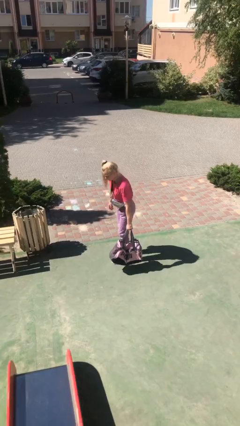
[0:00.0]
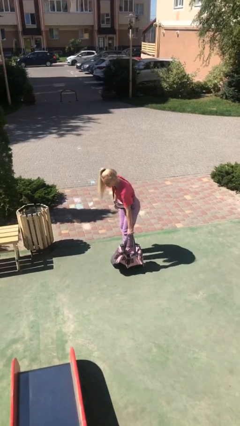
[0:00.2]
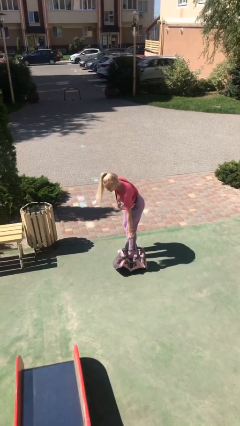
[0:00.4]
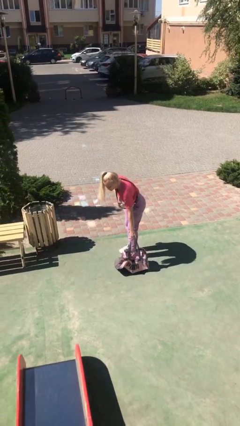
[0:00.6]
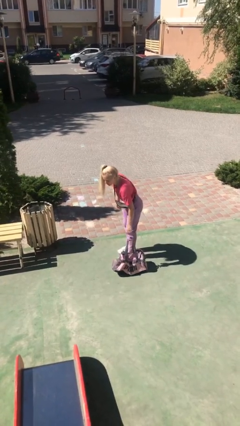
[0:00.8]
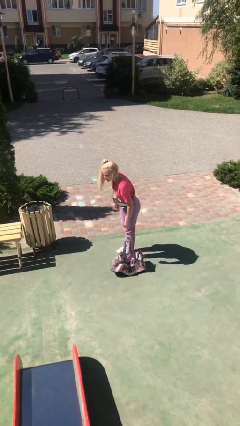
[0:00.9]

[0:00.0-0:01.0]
person puts down object on floor

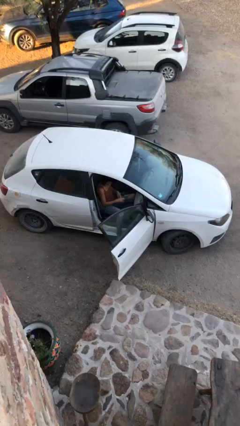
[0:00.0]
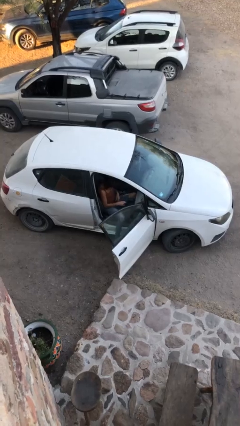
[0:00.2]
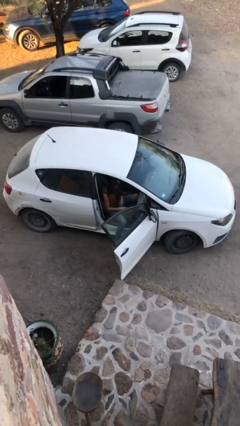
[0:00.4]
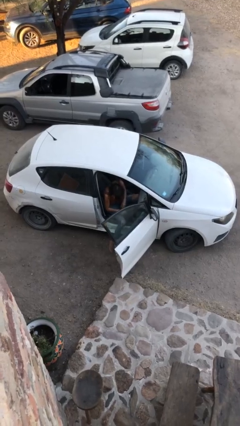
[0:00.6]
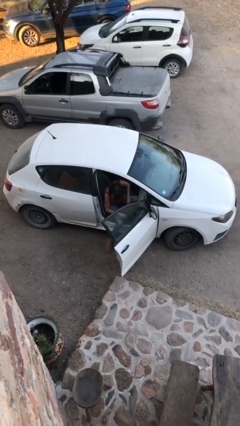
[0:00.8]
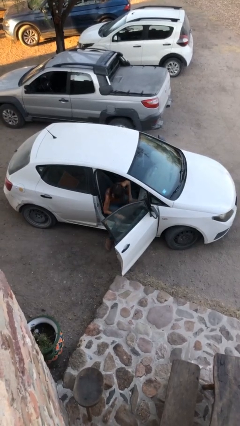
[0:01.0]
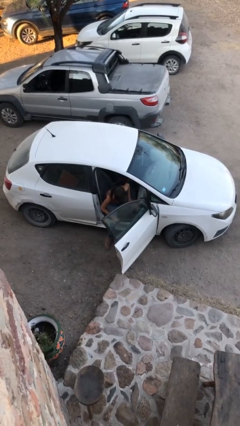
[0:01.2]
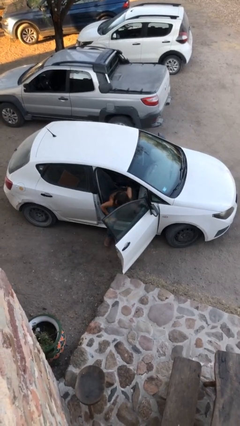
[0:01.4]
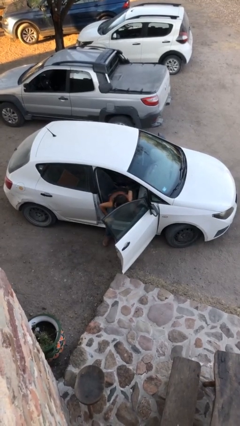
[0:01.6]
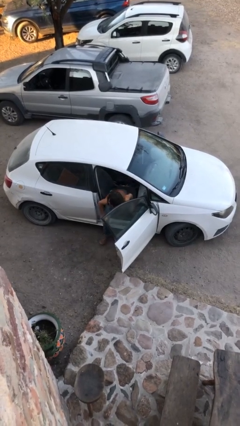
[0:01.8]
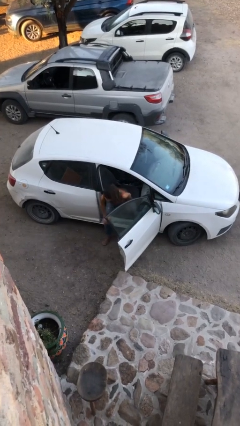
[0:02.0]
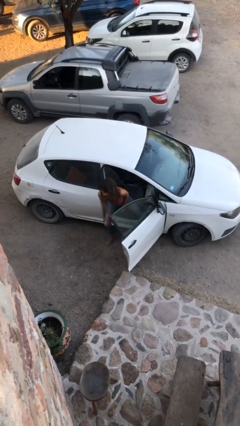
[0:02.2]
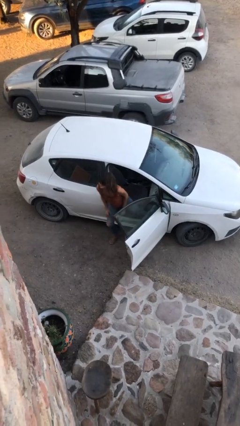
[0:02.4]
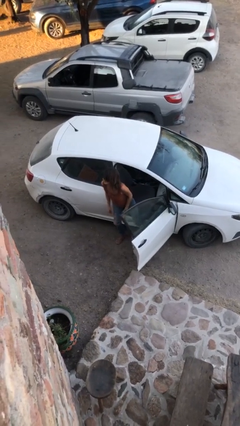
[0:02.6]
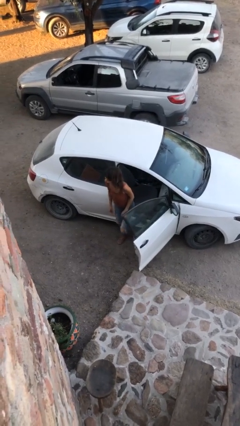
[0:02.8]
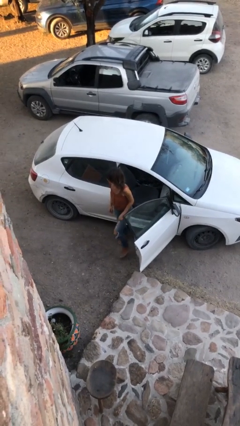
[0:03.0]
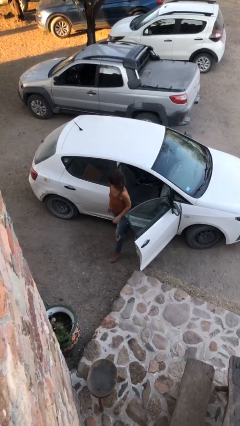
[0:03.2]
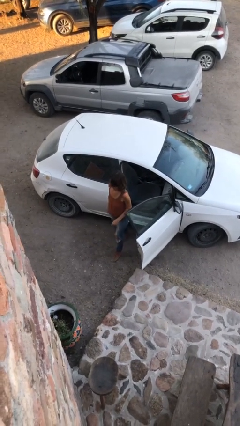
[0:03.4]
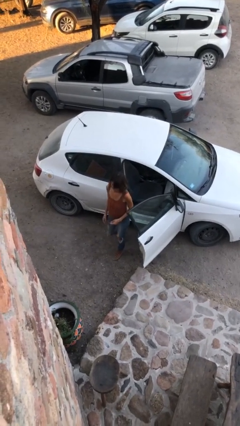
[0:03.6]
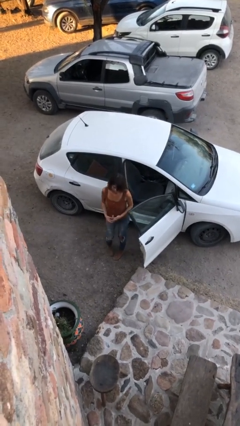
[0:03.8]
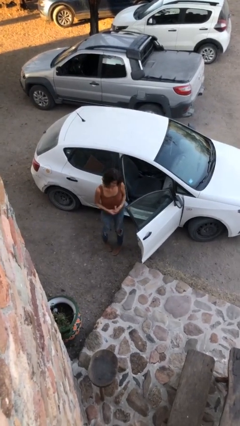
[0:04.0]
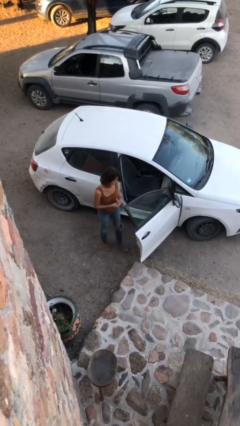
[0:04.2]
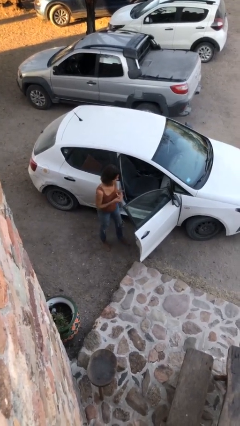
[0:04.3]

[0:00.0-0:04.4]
person exits car

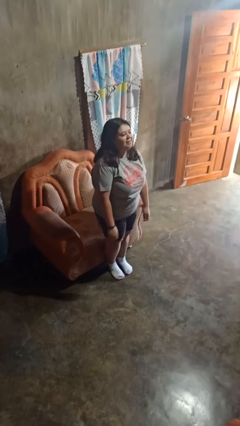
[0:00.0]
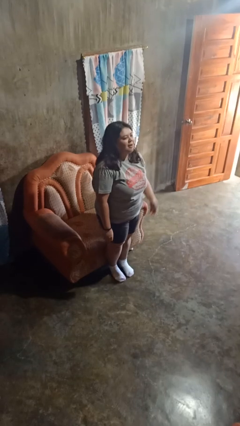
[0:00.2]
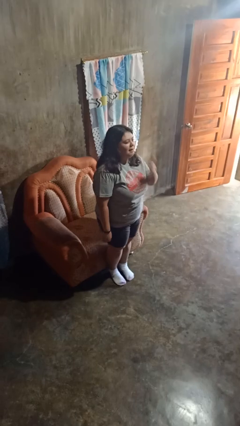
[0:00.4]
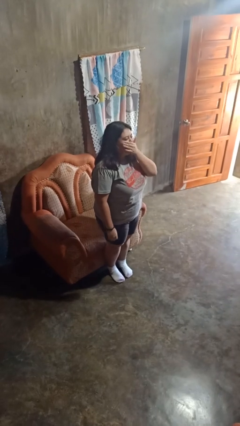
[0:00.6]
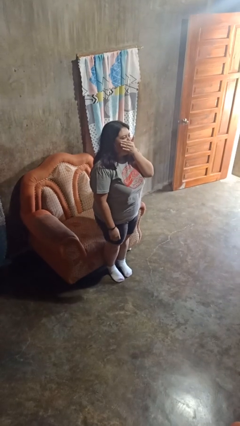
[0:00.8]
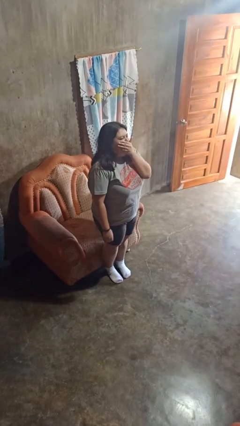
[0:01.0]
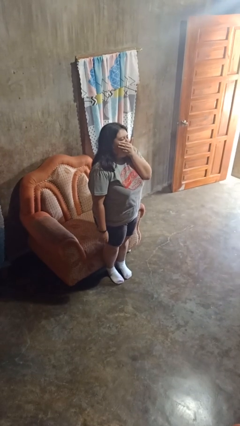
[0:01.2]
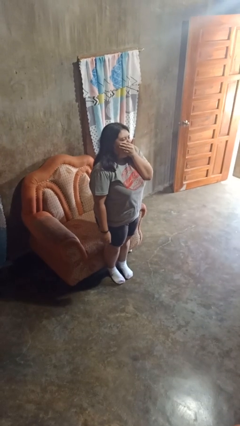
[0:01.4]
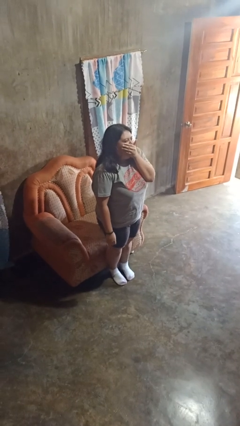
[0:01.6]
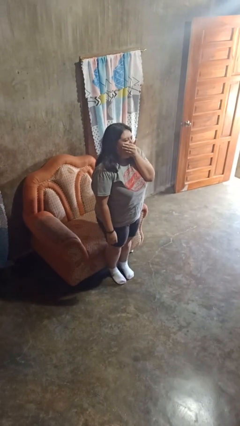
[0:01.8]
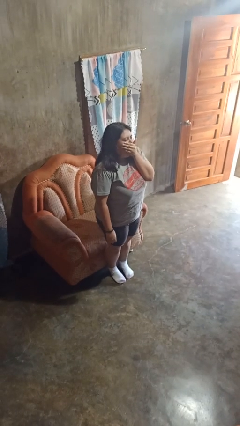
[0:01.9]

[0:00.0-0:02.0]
person yawns

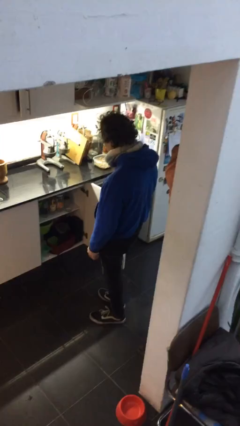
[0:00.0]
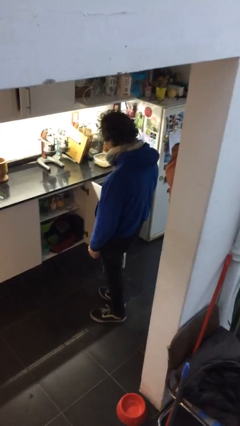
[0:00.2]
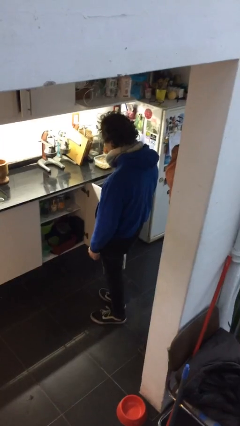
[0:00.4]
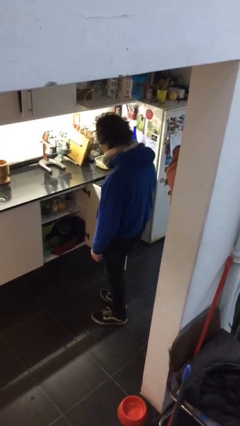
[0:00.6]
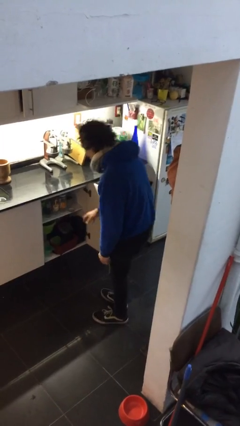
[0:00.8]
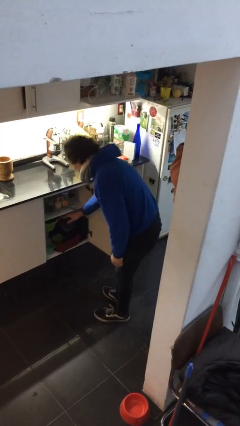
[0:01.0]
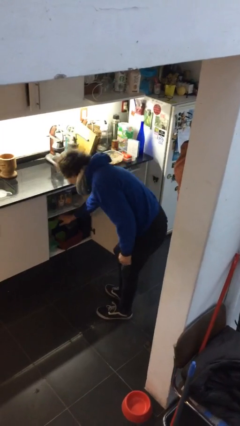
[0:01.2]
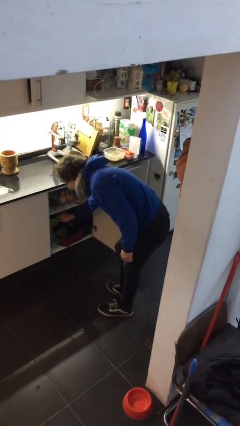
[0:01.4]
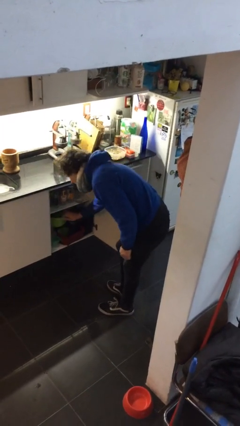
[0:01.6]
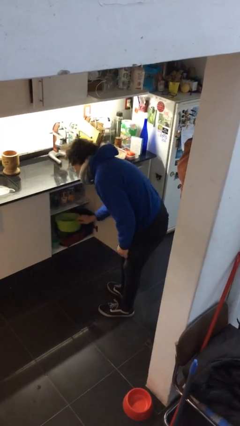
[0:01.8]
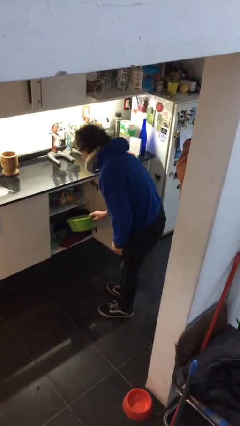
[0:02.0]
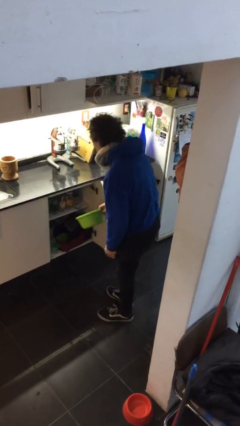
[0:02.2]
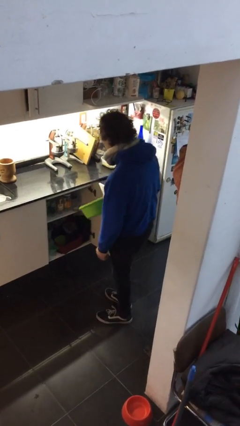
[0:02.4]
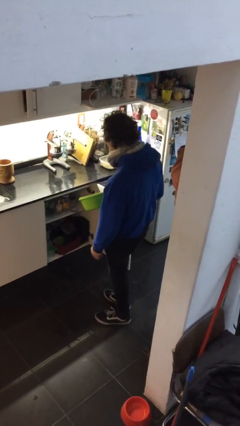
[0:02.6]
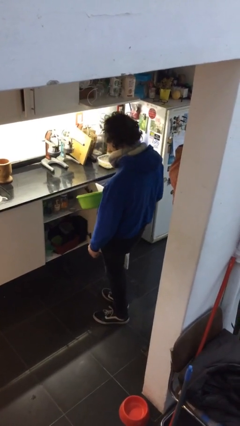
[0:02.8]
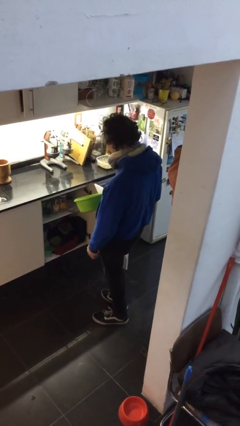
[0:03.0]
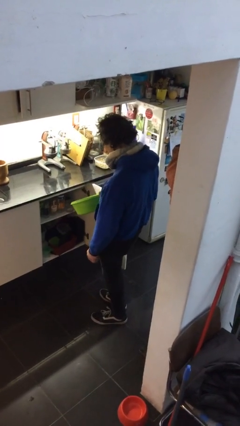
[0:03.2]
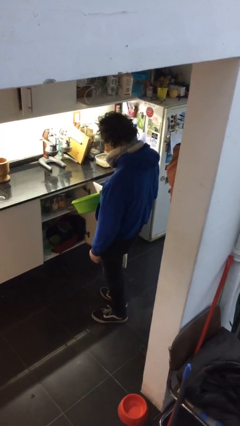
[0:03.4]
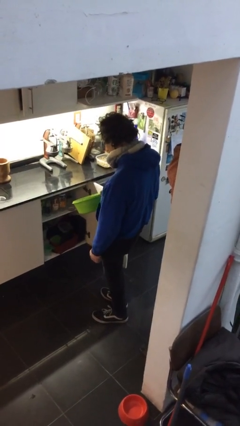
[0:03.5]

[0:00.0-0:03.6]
person picks up object from cabinet

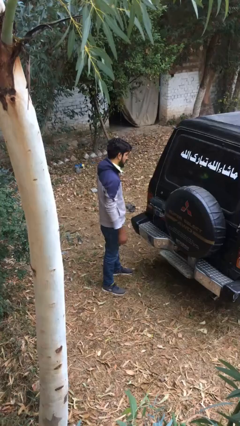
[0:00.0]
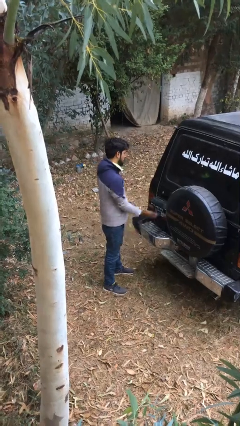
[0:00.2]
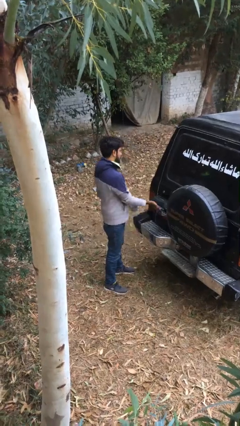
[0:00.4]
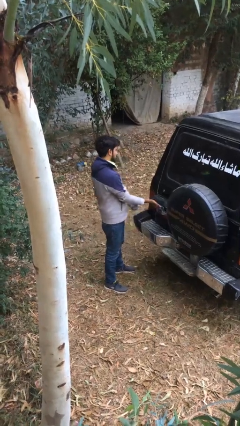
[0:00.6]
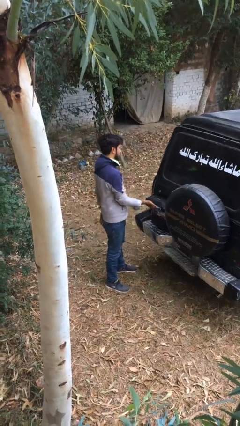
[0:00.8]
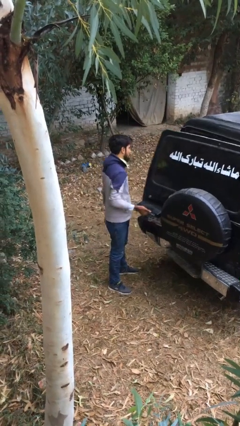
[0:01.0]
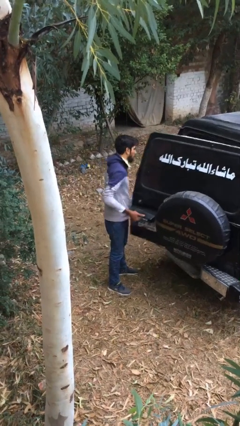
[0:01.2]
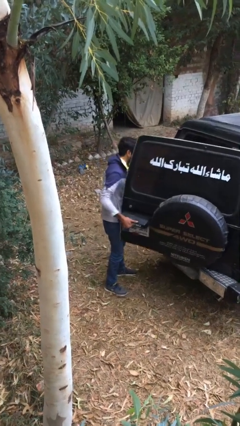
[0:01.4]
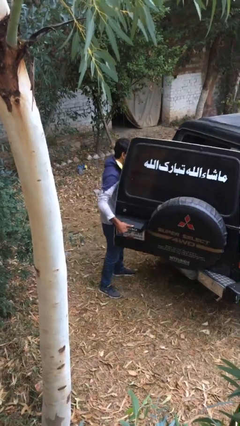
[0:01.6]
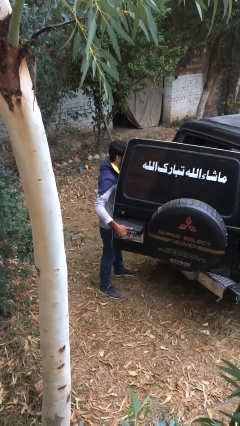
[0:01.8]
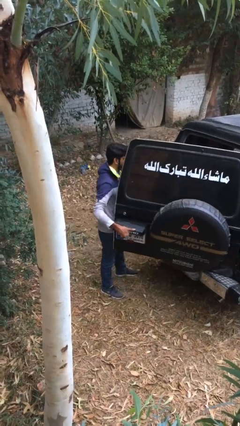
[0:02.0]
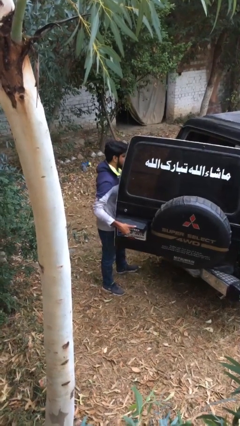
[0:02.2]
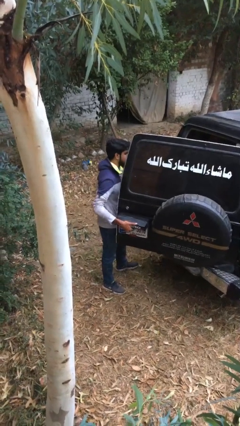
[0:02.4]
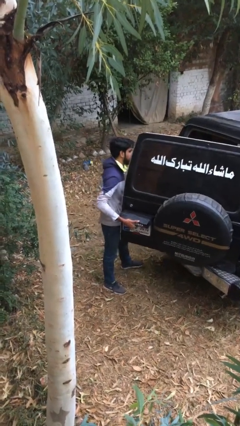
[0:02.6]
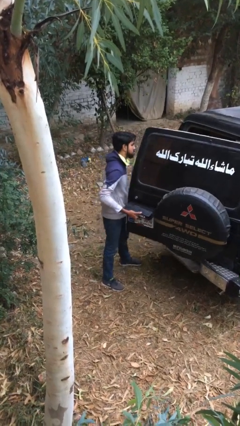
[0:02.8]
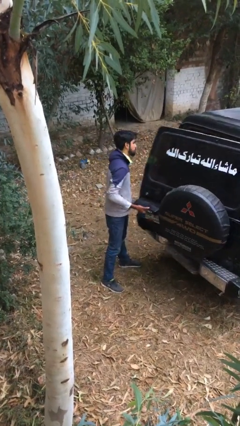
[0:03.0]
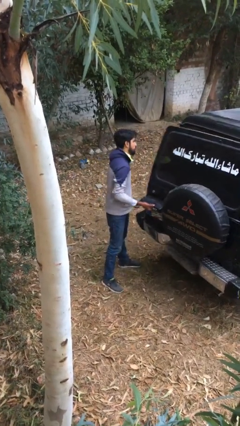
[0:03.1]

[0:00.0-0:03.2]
person opens car trunk

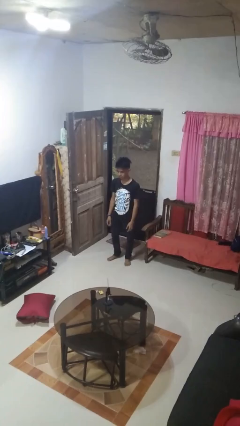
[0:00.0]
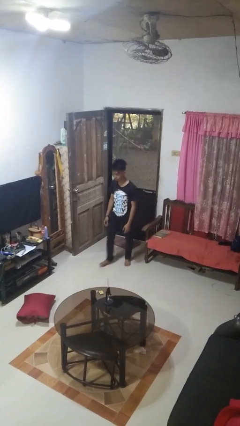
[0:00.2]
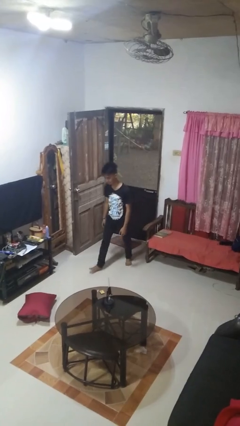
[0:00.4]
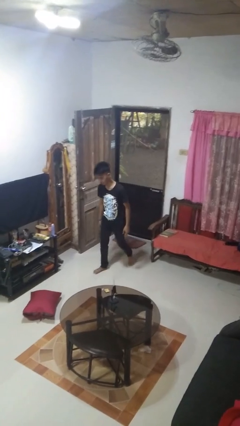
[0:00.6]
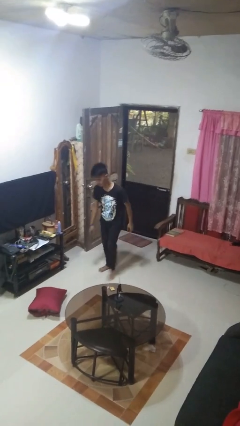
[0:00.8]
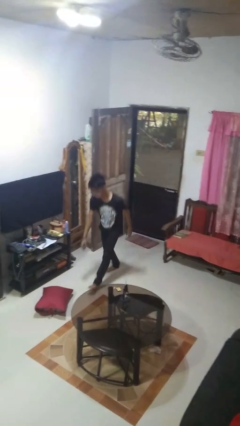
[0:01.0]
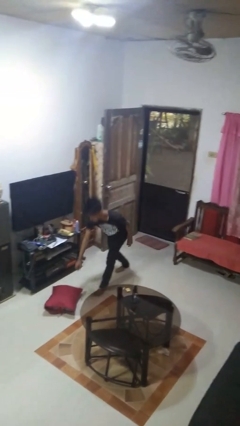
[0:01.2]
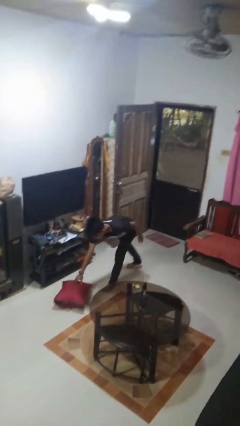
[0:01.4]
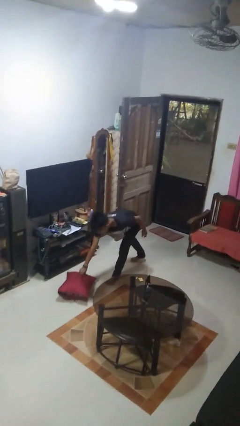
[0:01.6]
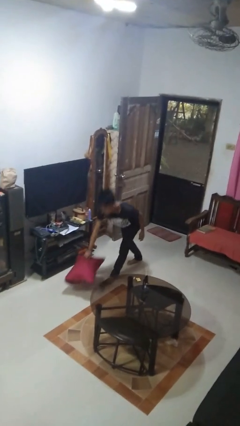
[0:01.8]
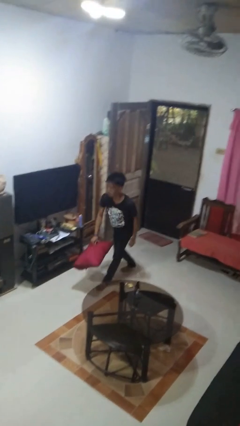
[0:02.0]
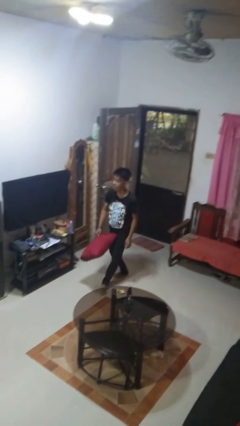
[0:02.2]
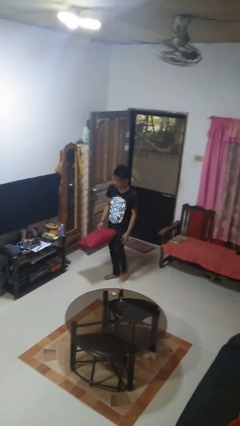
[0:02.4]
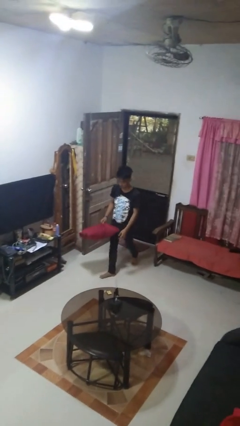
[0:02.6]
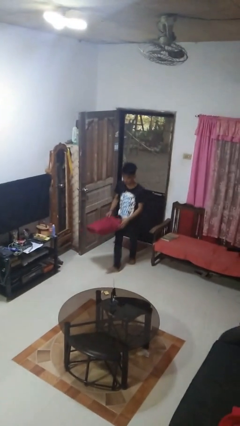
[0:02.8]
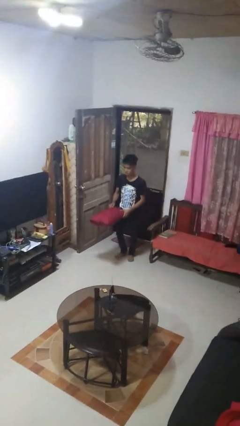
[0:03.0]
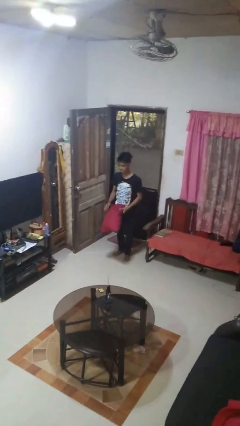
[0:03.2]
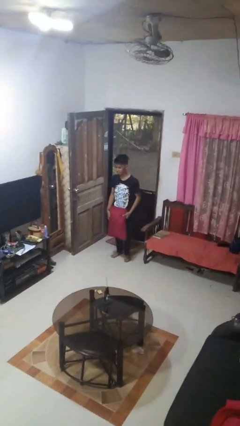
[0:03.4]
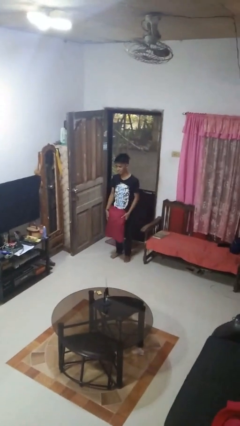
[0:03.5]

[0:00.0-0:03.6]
person picks up object from floor
